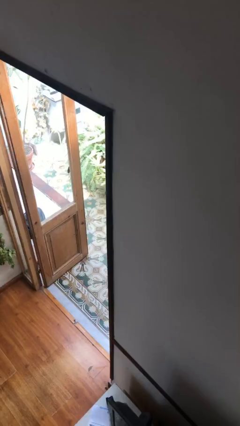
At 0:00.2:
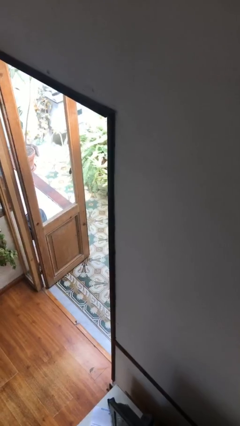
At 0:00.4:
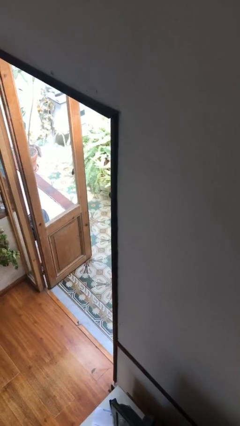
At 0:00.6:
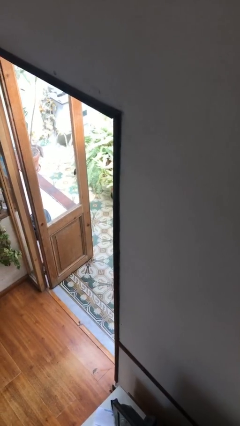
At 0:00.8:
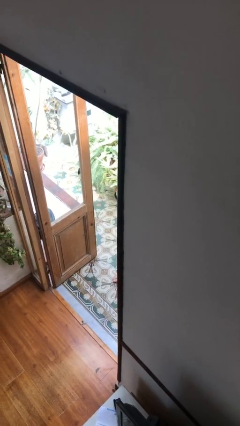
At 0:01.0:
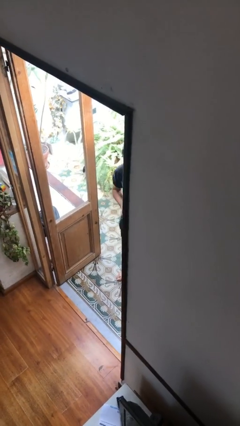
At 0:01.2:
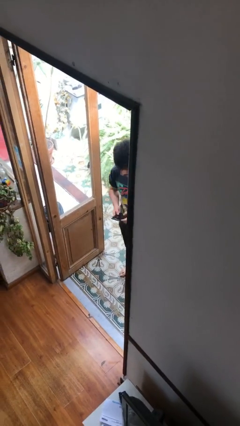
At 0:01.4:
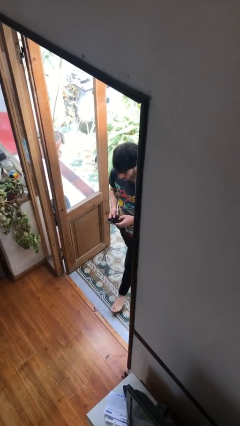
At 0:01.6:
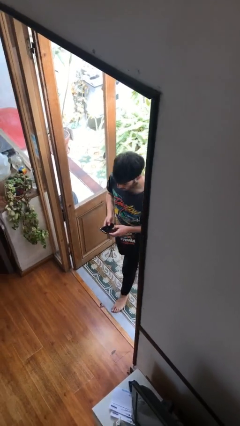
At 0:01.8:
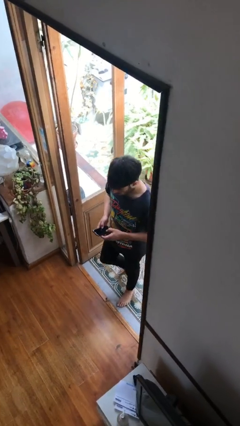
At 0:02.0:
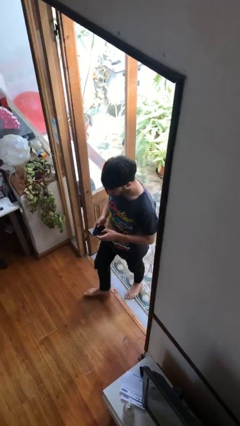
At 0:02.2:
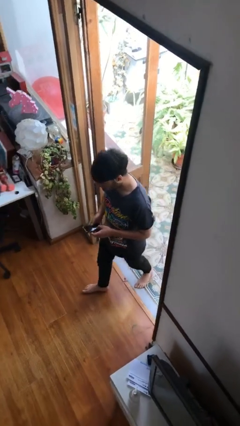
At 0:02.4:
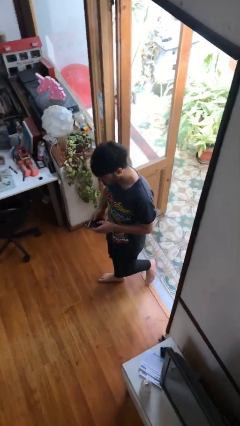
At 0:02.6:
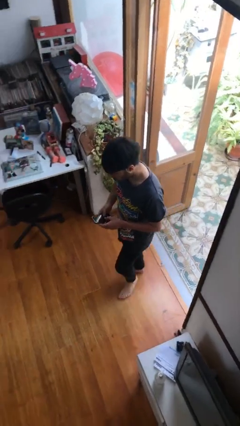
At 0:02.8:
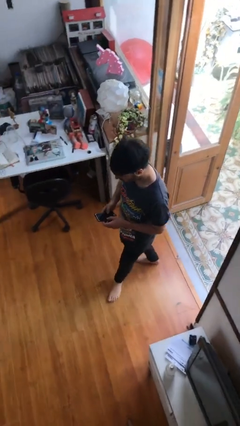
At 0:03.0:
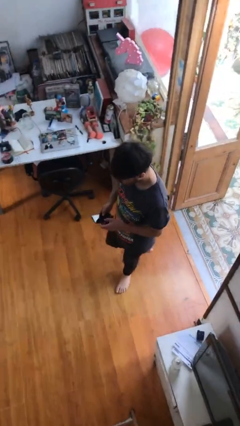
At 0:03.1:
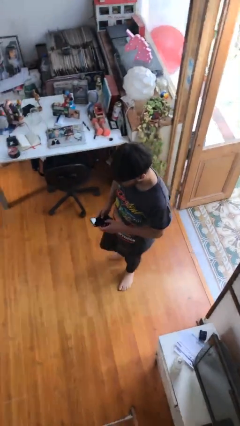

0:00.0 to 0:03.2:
person enters scene through structure

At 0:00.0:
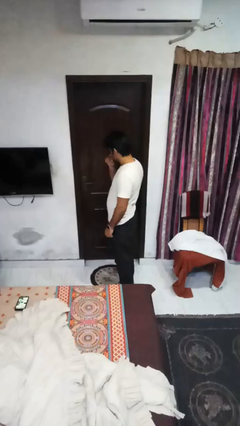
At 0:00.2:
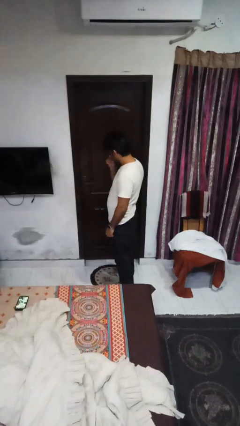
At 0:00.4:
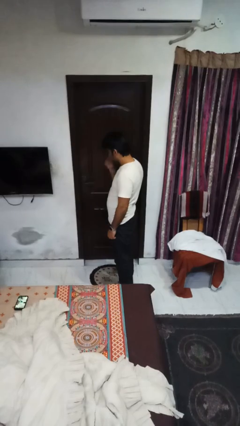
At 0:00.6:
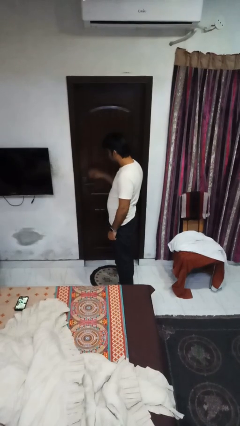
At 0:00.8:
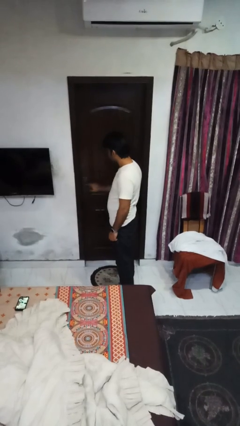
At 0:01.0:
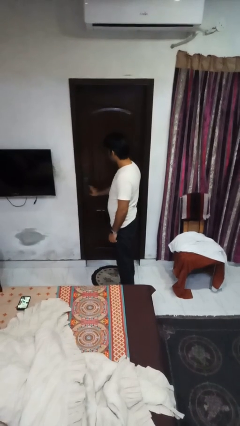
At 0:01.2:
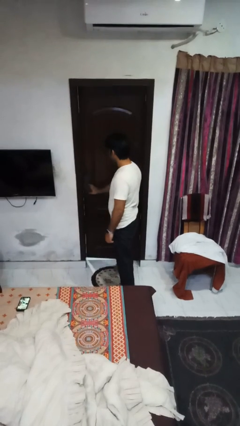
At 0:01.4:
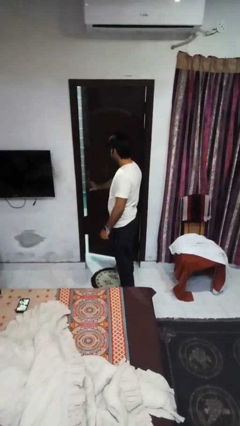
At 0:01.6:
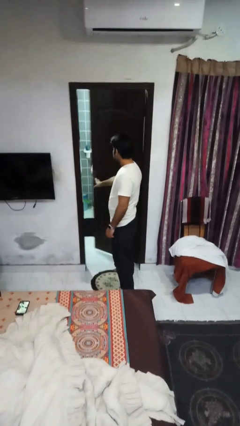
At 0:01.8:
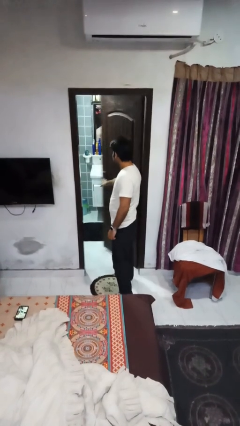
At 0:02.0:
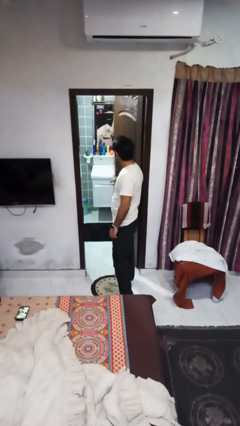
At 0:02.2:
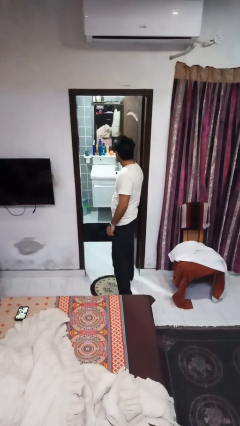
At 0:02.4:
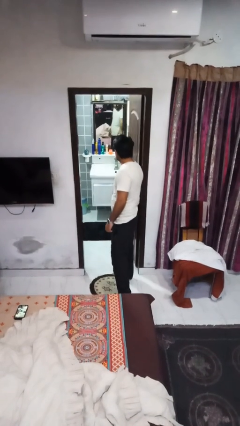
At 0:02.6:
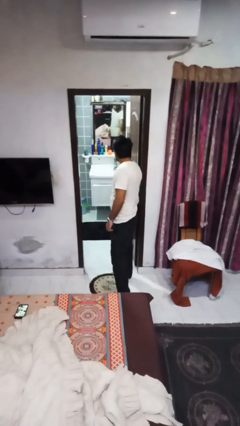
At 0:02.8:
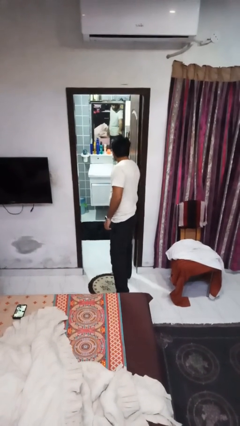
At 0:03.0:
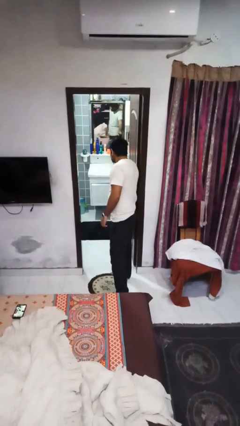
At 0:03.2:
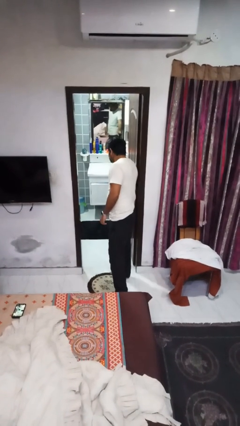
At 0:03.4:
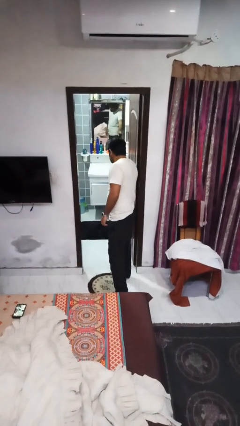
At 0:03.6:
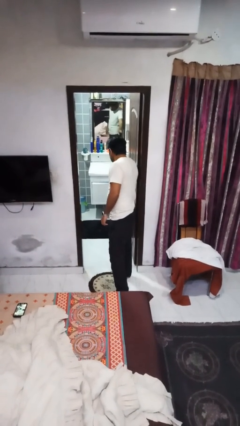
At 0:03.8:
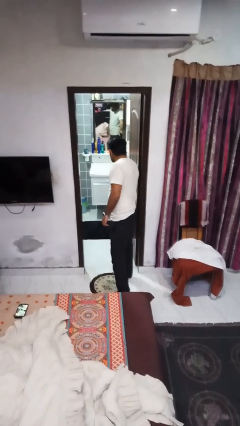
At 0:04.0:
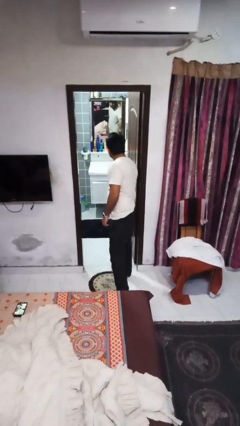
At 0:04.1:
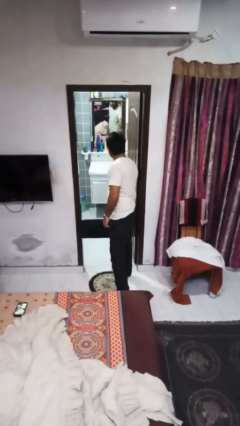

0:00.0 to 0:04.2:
person opens facility door

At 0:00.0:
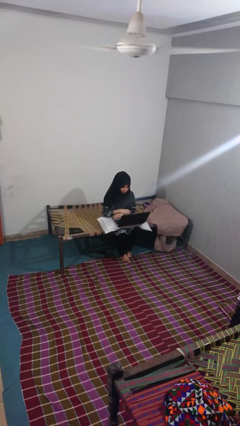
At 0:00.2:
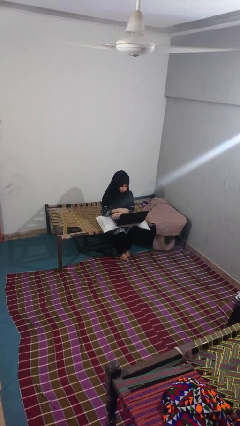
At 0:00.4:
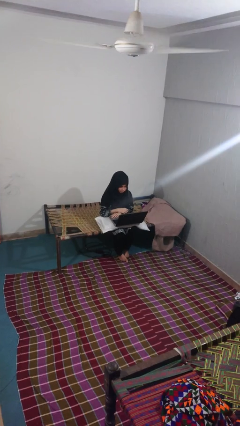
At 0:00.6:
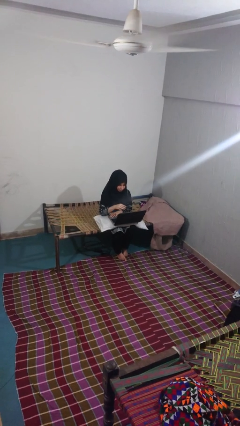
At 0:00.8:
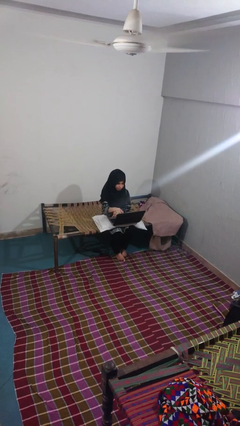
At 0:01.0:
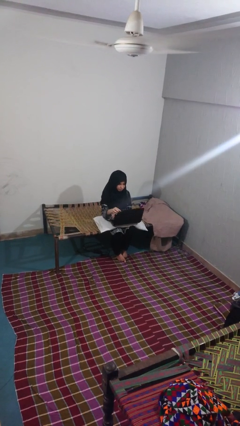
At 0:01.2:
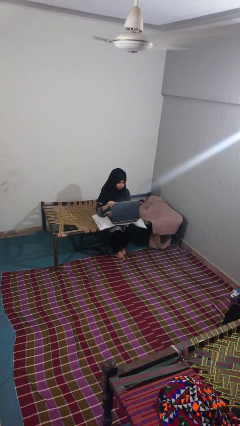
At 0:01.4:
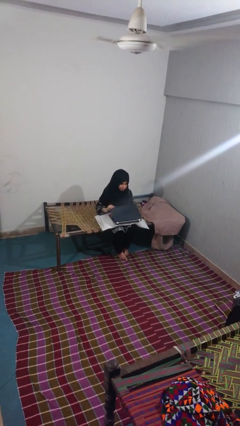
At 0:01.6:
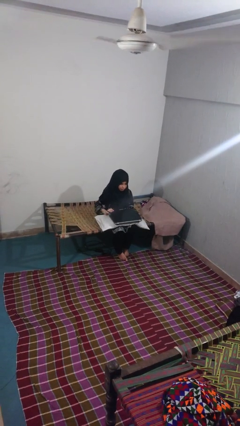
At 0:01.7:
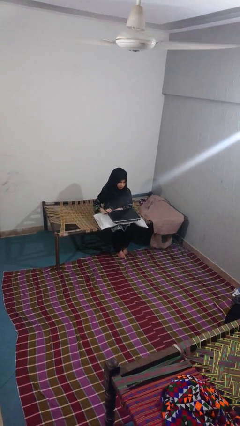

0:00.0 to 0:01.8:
person closes laptop

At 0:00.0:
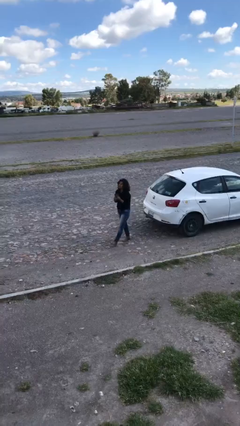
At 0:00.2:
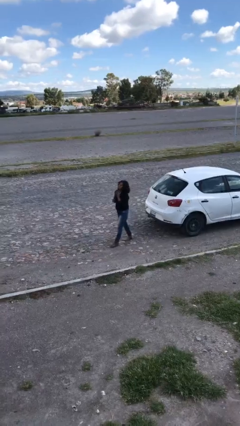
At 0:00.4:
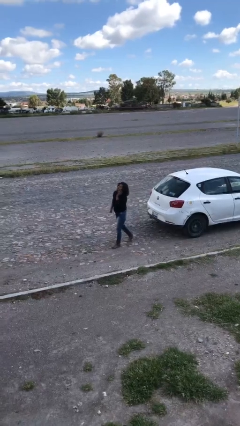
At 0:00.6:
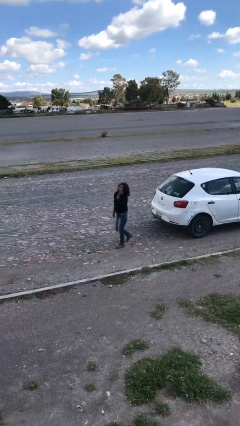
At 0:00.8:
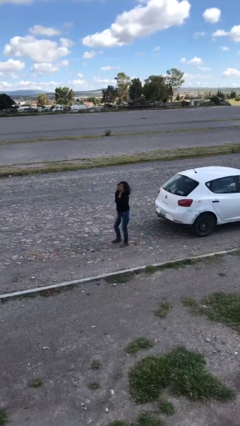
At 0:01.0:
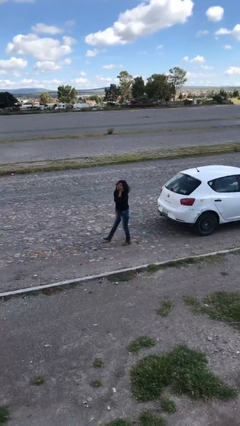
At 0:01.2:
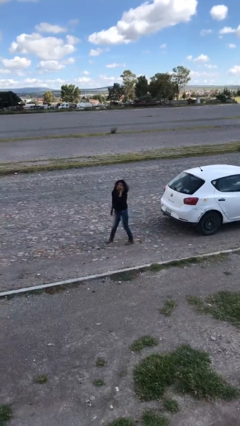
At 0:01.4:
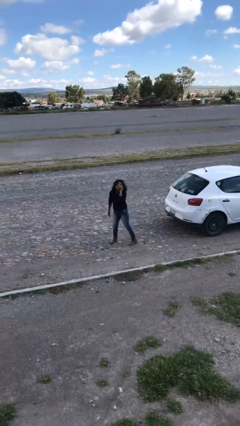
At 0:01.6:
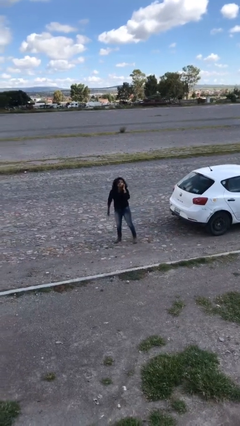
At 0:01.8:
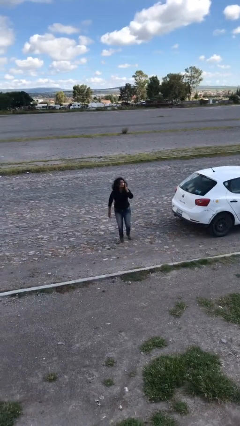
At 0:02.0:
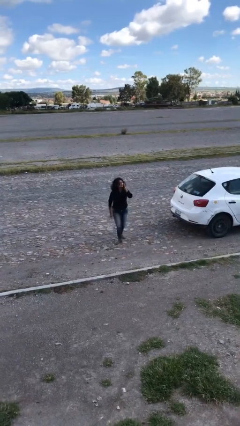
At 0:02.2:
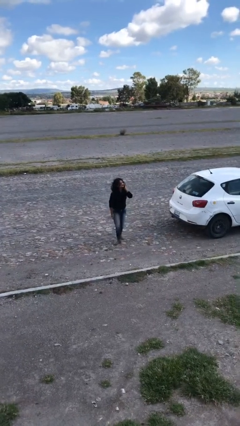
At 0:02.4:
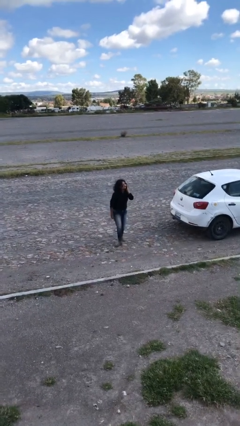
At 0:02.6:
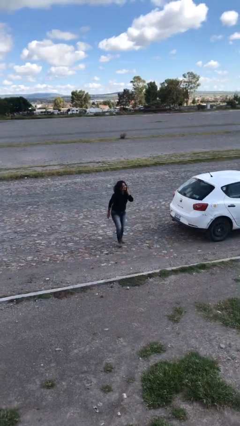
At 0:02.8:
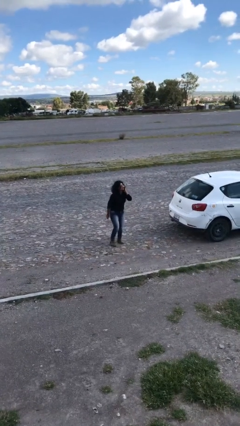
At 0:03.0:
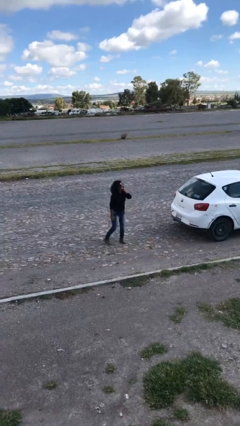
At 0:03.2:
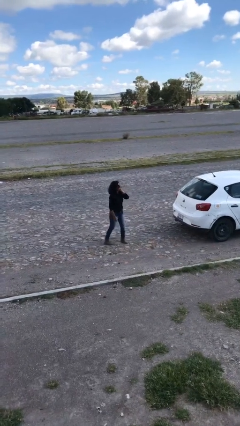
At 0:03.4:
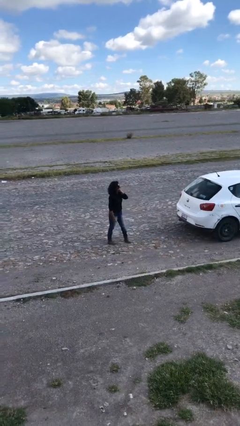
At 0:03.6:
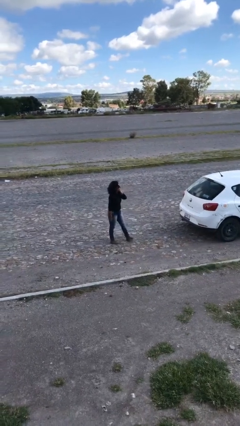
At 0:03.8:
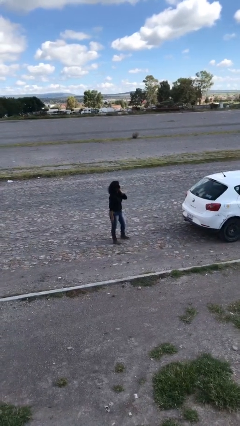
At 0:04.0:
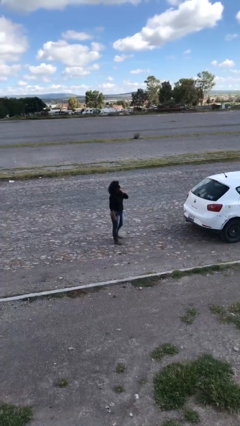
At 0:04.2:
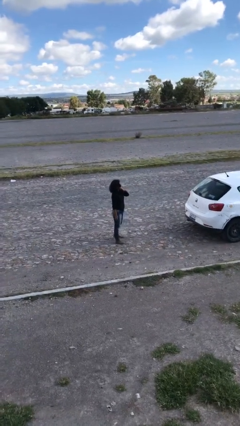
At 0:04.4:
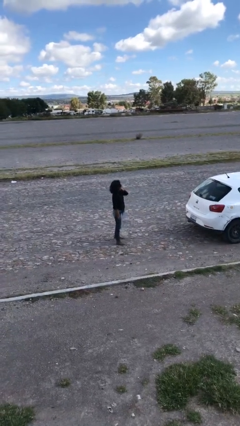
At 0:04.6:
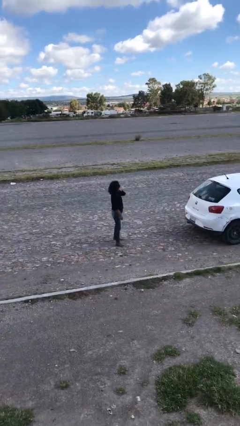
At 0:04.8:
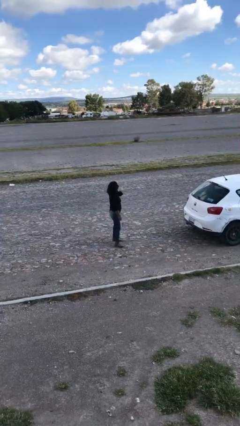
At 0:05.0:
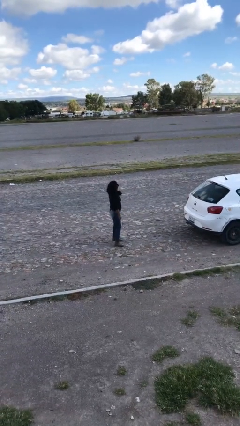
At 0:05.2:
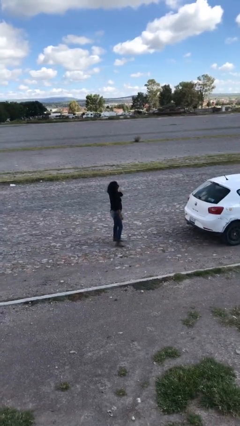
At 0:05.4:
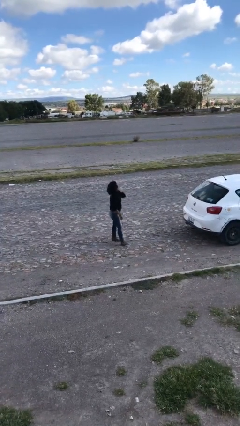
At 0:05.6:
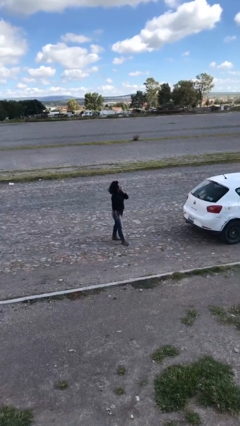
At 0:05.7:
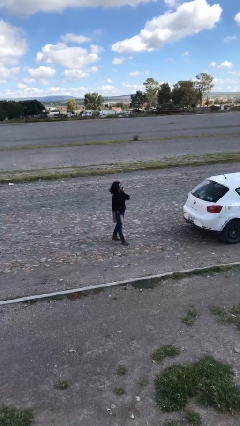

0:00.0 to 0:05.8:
person talks on phone

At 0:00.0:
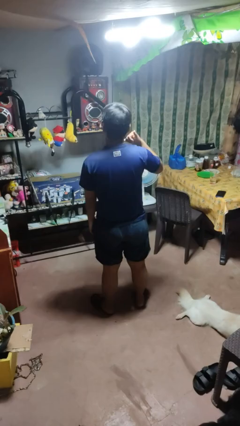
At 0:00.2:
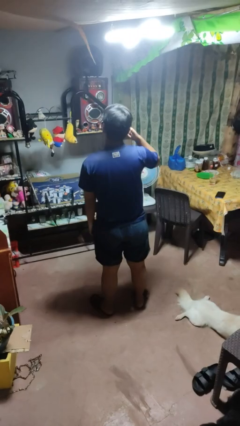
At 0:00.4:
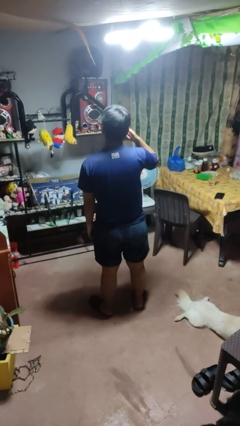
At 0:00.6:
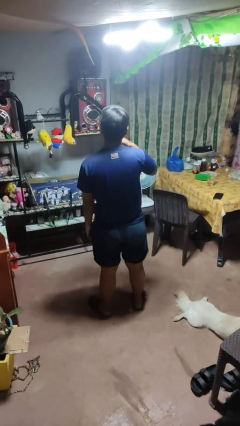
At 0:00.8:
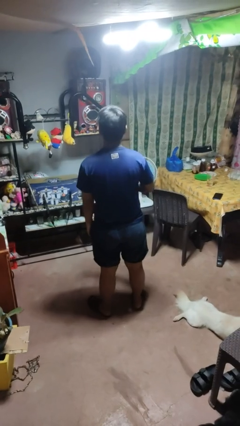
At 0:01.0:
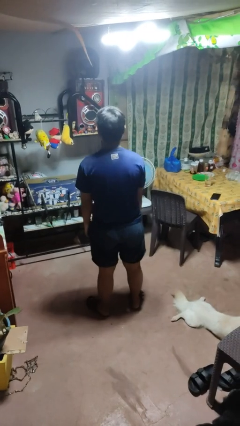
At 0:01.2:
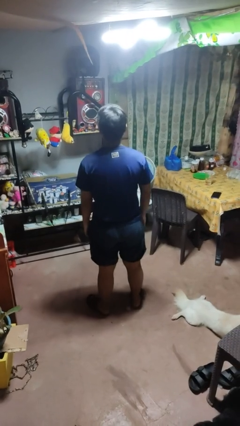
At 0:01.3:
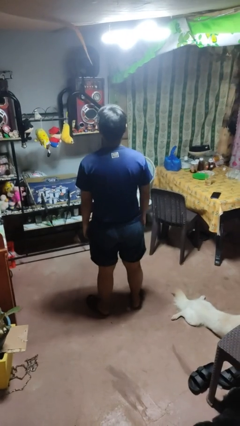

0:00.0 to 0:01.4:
person gestures call me

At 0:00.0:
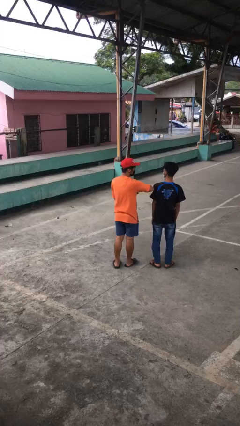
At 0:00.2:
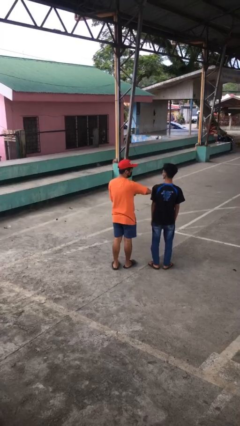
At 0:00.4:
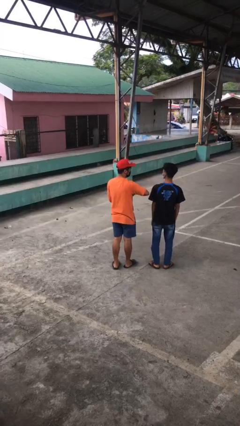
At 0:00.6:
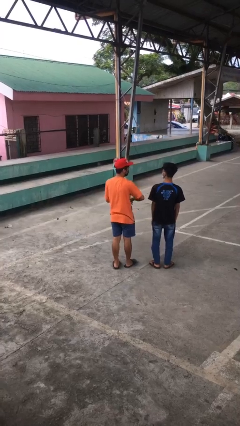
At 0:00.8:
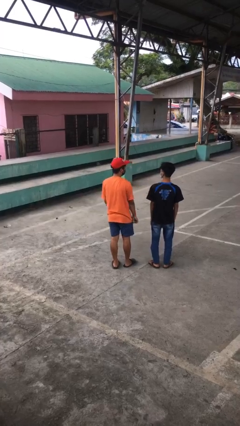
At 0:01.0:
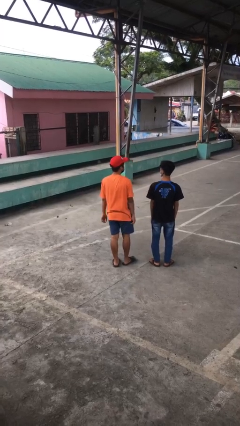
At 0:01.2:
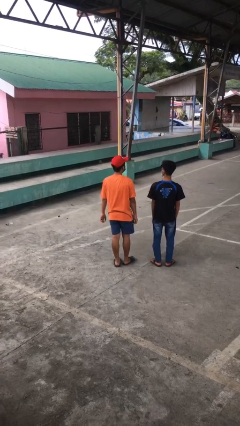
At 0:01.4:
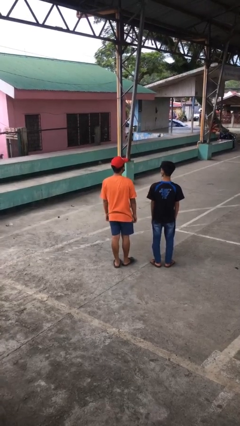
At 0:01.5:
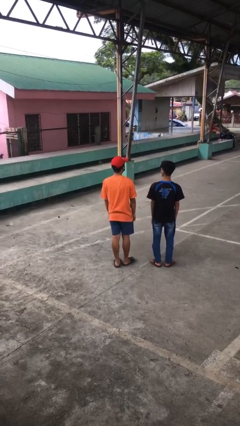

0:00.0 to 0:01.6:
person nudges person with elbow
